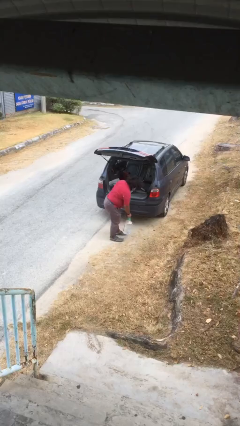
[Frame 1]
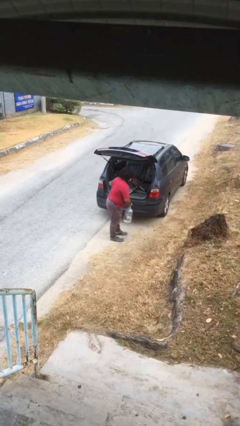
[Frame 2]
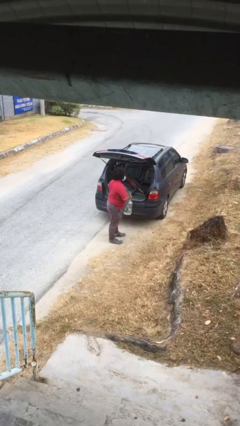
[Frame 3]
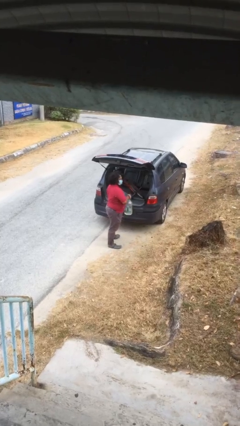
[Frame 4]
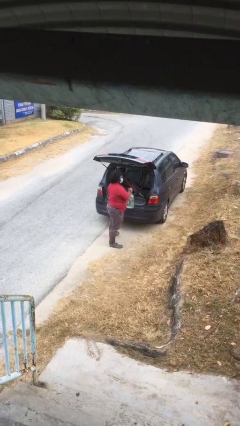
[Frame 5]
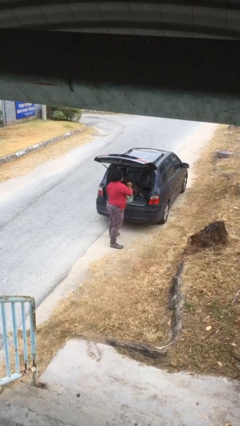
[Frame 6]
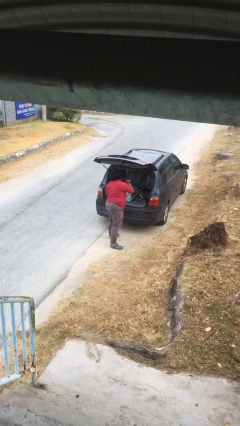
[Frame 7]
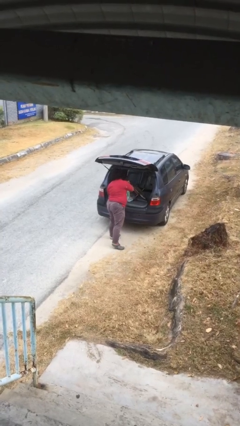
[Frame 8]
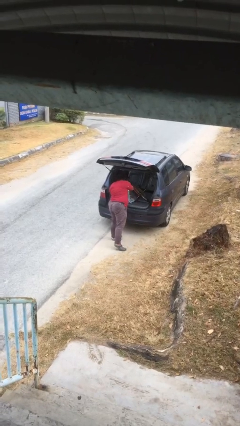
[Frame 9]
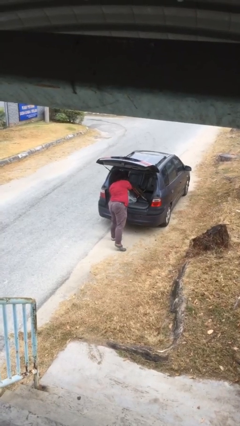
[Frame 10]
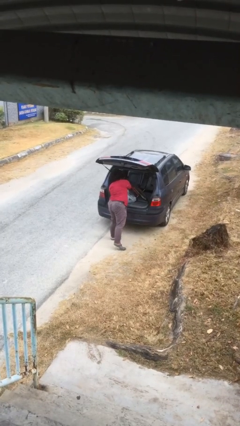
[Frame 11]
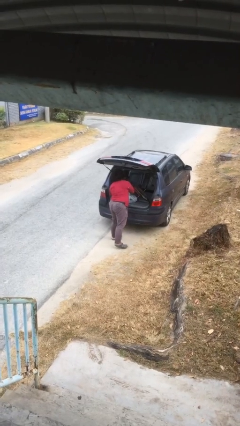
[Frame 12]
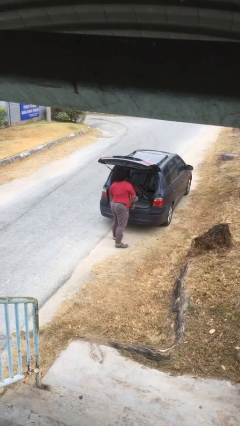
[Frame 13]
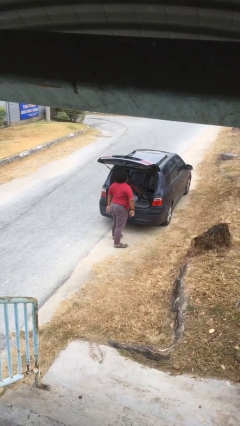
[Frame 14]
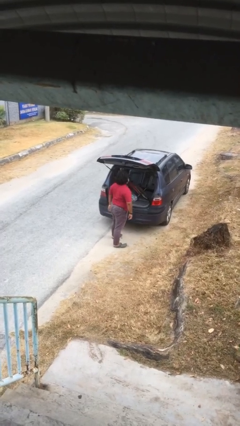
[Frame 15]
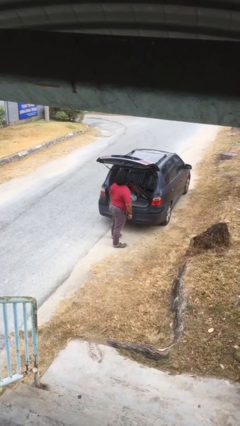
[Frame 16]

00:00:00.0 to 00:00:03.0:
person loads car

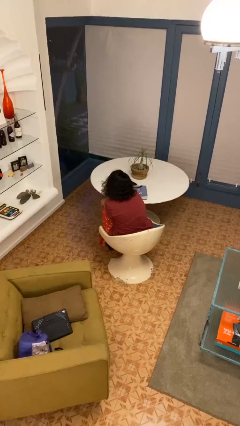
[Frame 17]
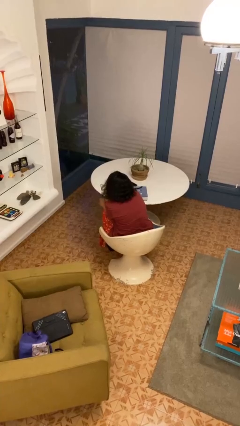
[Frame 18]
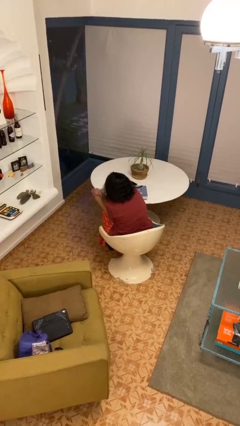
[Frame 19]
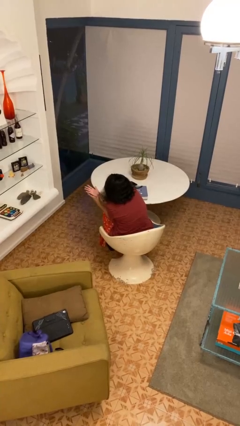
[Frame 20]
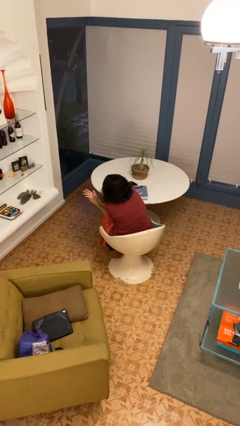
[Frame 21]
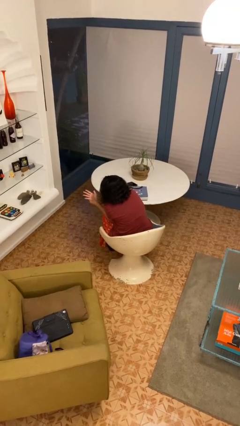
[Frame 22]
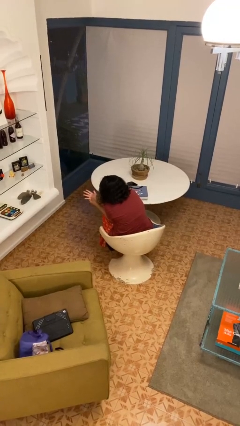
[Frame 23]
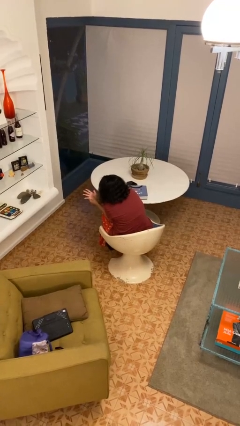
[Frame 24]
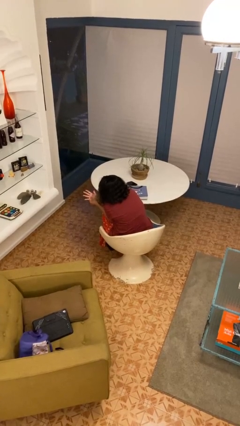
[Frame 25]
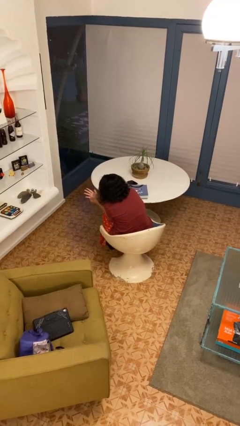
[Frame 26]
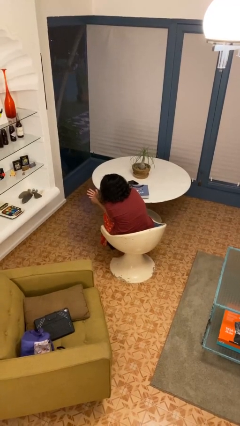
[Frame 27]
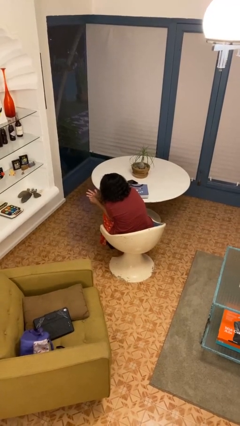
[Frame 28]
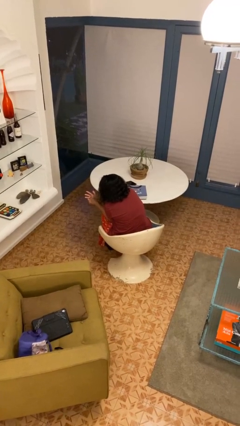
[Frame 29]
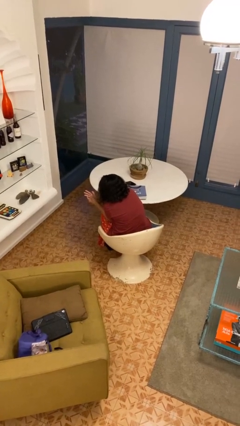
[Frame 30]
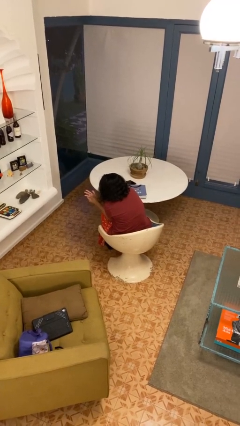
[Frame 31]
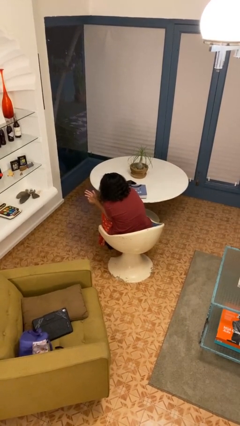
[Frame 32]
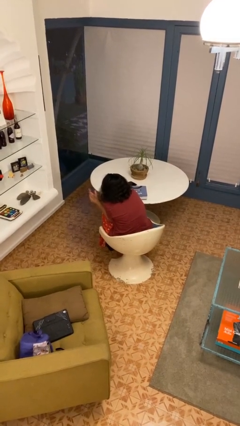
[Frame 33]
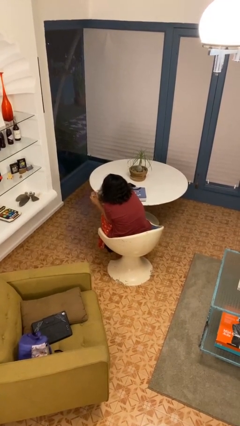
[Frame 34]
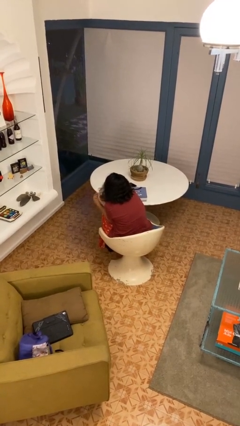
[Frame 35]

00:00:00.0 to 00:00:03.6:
person looks at hands in lap

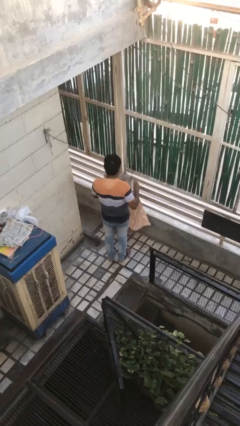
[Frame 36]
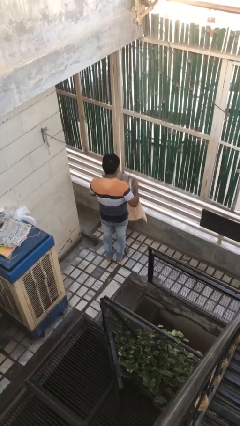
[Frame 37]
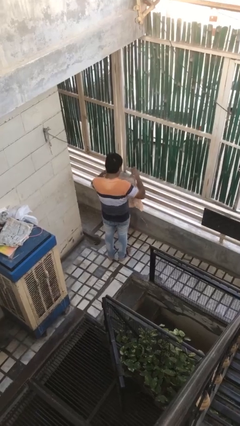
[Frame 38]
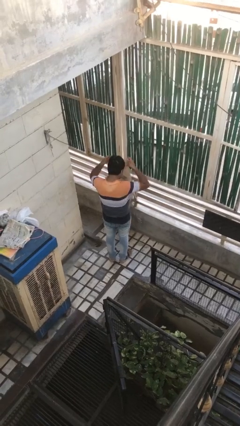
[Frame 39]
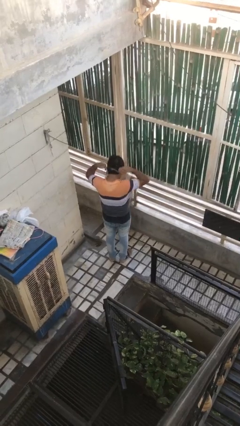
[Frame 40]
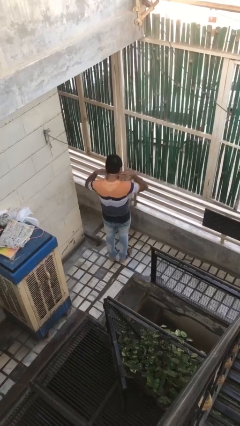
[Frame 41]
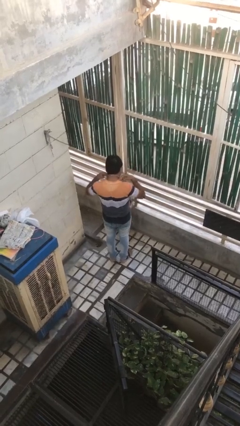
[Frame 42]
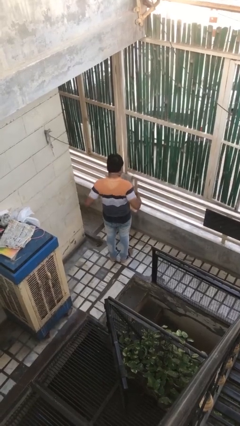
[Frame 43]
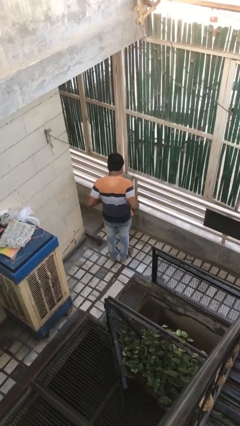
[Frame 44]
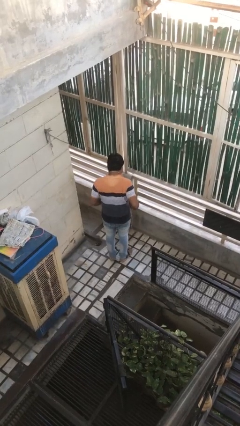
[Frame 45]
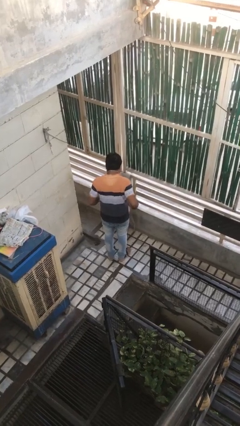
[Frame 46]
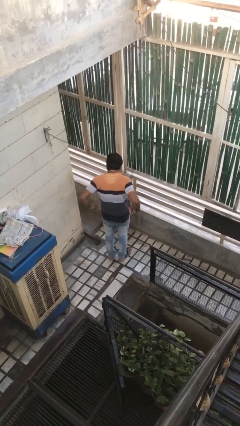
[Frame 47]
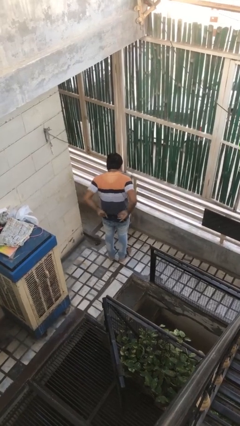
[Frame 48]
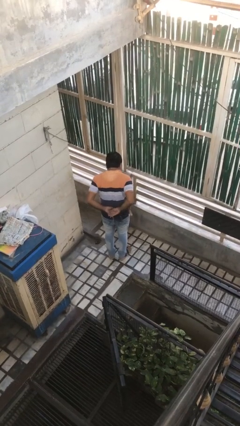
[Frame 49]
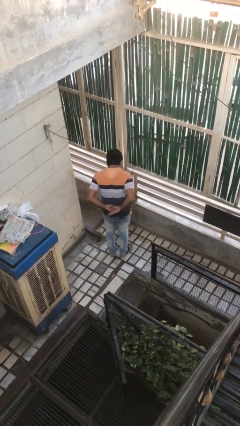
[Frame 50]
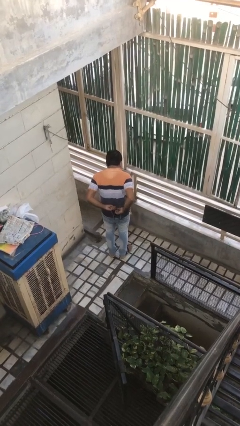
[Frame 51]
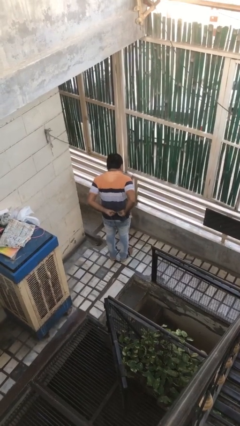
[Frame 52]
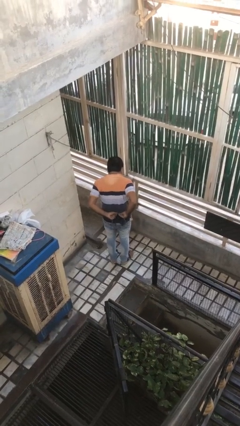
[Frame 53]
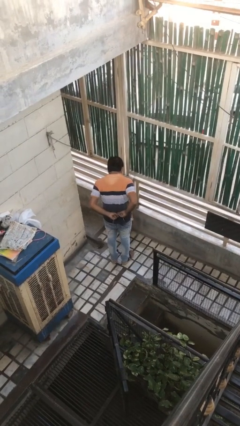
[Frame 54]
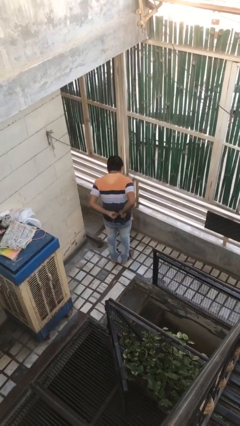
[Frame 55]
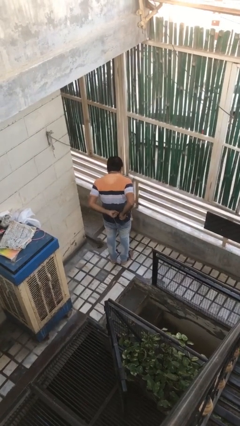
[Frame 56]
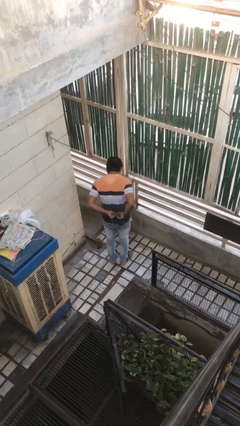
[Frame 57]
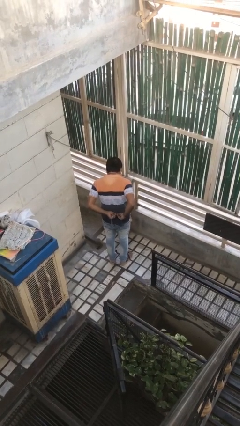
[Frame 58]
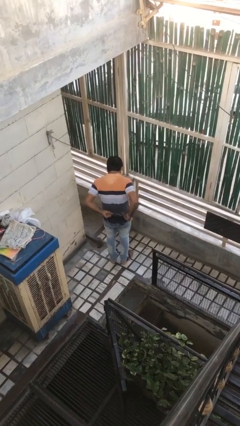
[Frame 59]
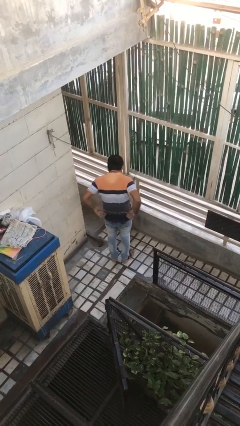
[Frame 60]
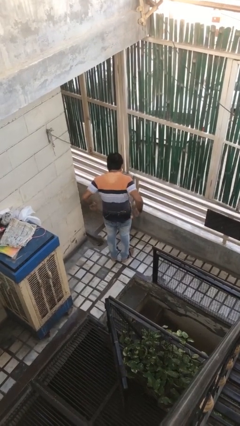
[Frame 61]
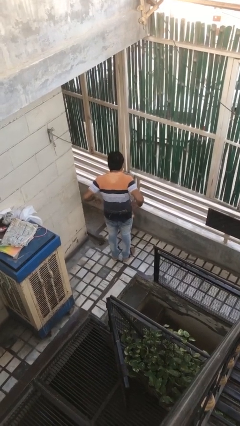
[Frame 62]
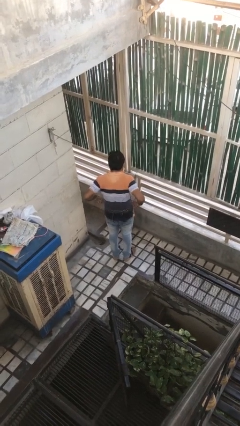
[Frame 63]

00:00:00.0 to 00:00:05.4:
person puts on apron

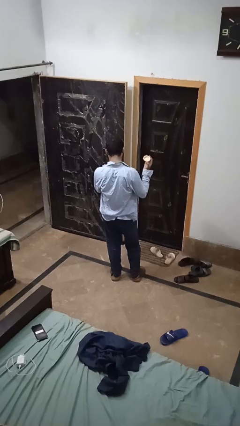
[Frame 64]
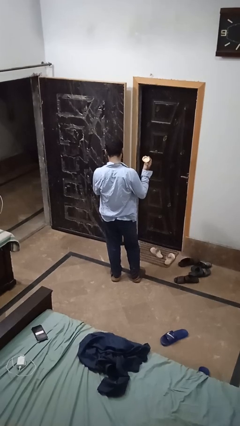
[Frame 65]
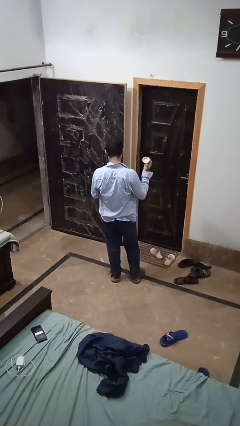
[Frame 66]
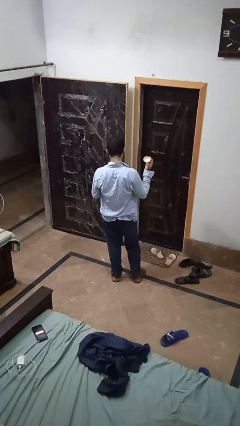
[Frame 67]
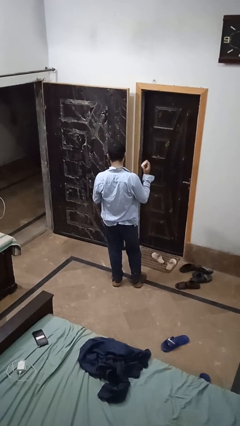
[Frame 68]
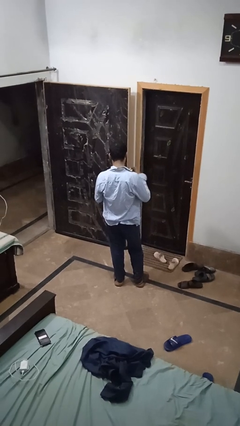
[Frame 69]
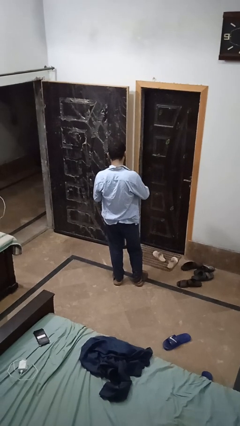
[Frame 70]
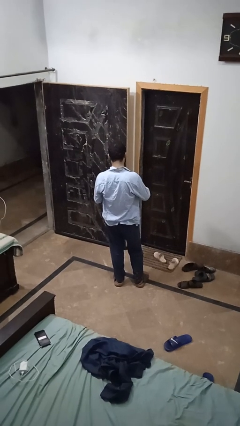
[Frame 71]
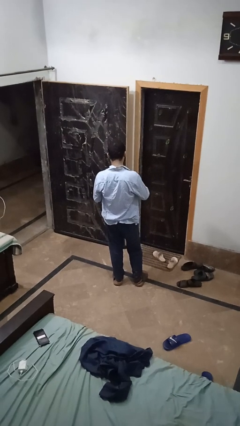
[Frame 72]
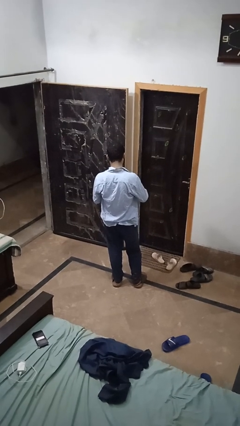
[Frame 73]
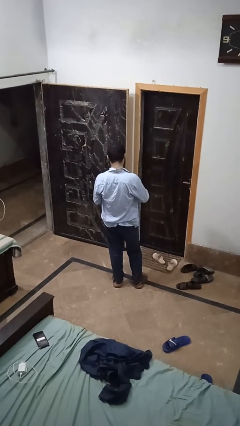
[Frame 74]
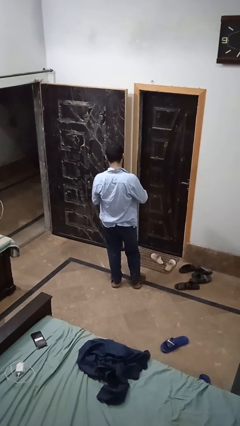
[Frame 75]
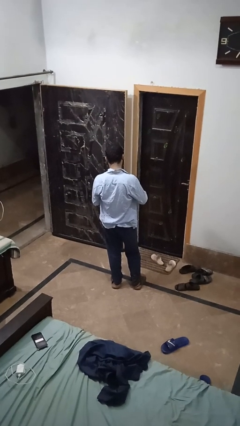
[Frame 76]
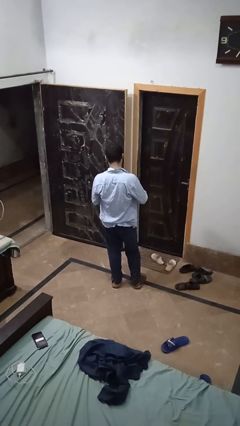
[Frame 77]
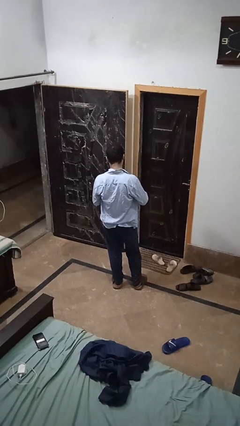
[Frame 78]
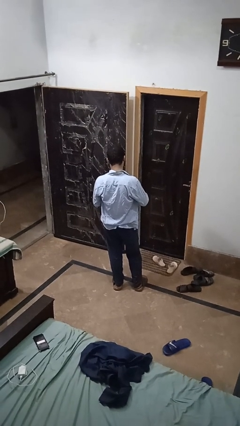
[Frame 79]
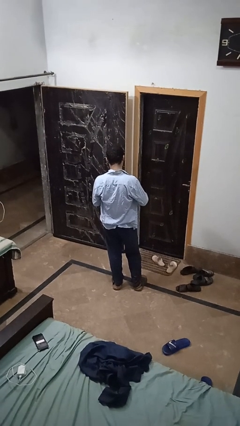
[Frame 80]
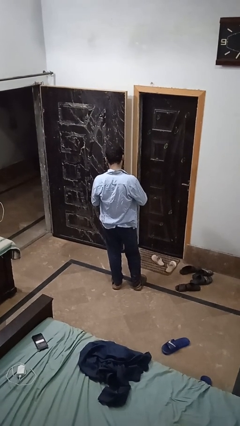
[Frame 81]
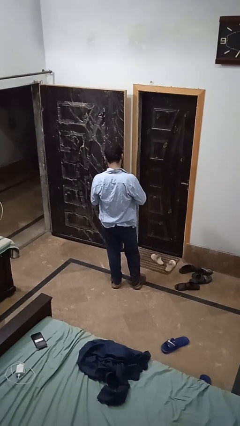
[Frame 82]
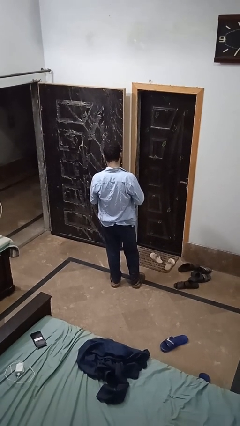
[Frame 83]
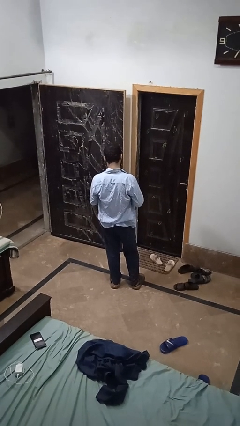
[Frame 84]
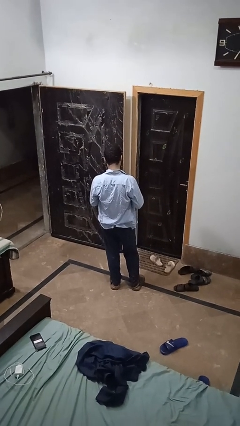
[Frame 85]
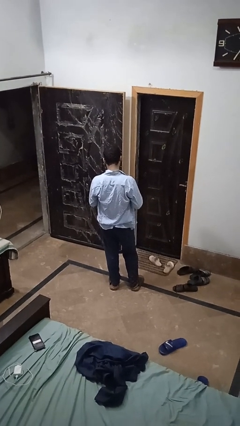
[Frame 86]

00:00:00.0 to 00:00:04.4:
person closes jar

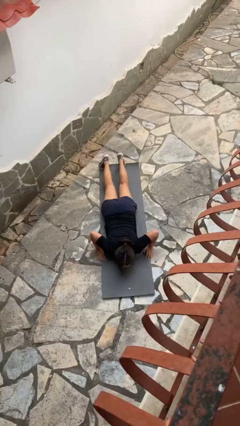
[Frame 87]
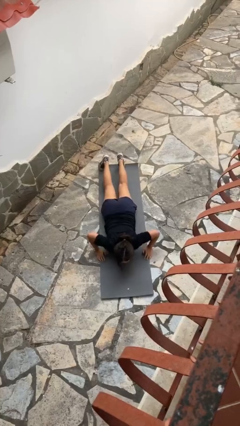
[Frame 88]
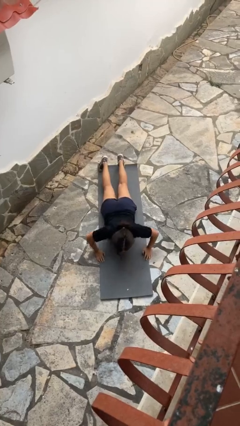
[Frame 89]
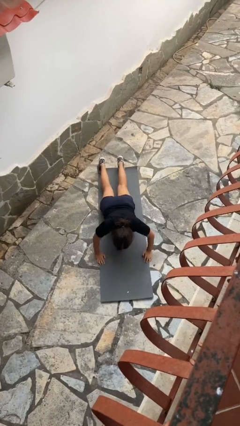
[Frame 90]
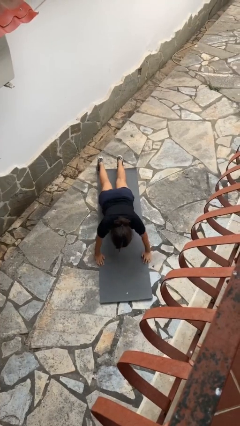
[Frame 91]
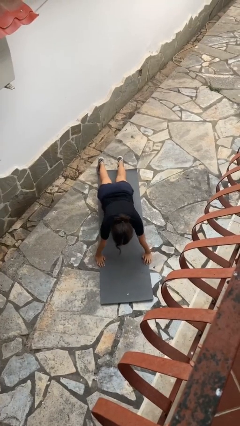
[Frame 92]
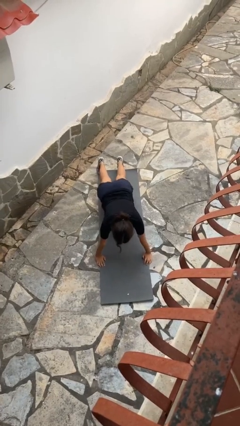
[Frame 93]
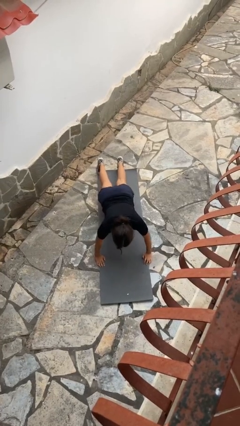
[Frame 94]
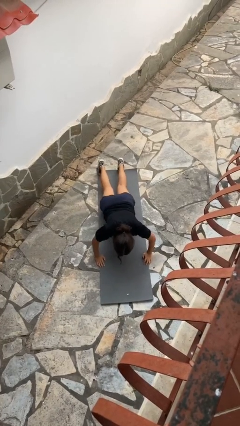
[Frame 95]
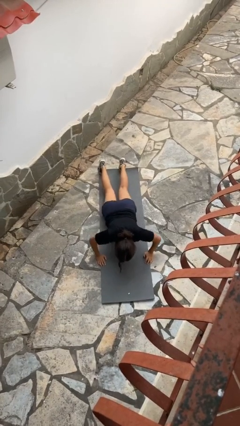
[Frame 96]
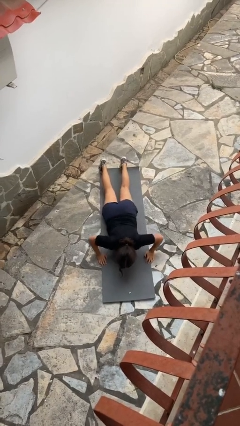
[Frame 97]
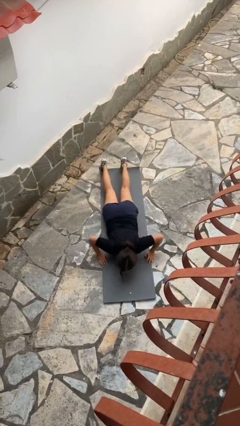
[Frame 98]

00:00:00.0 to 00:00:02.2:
person exercises with pushup
